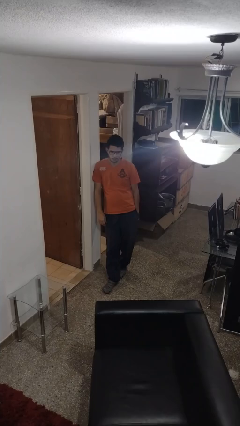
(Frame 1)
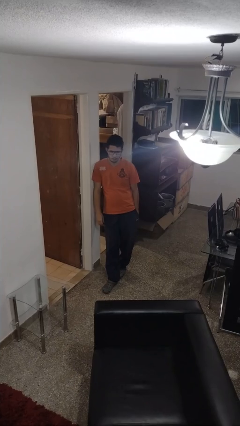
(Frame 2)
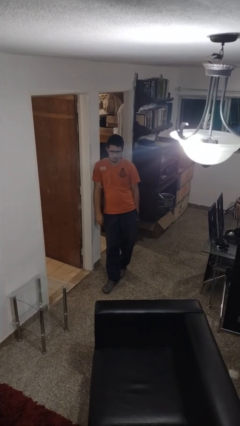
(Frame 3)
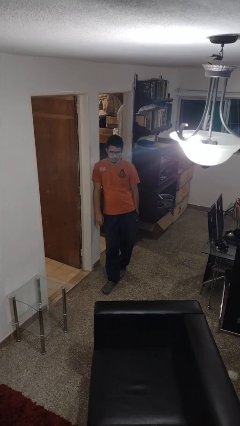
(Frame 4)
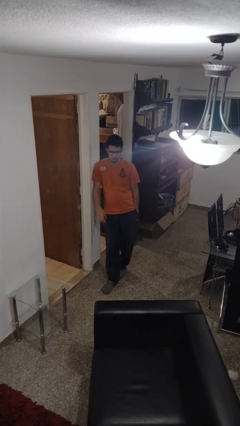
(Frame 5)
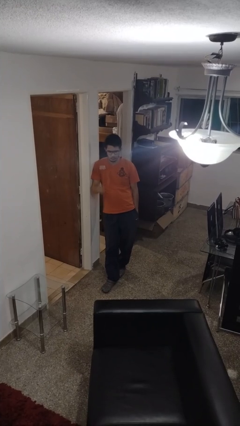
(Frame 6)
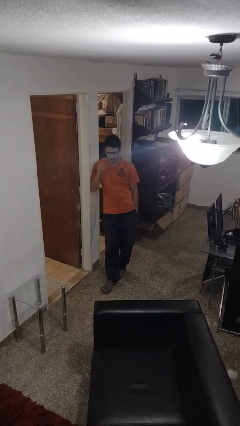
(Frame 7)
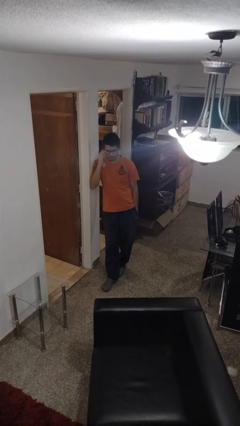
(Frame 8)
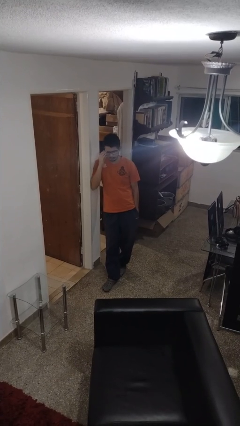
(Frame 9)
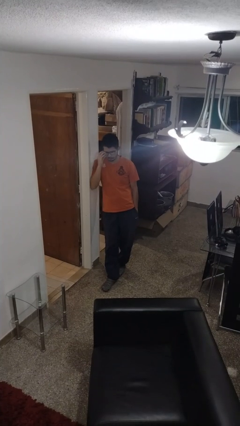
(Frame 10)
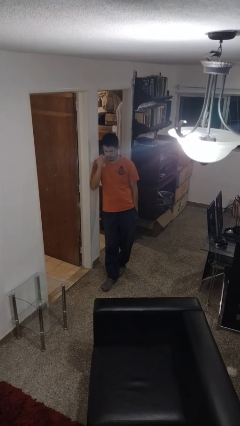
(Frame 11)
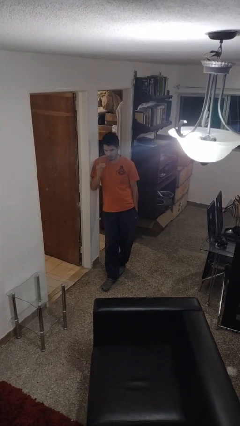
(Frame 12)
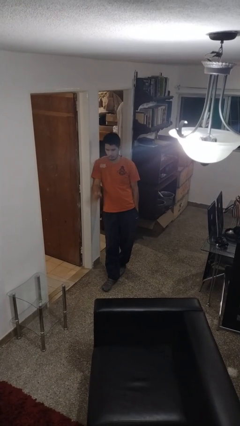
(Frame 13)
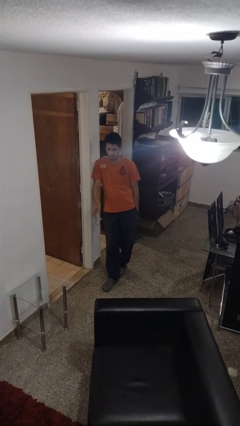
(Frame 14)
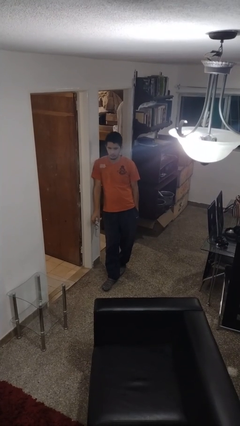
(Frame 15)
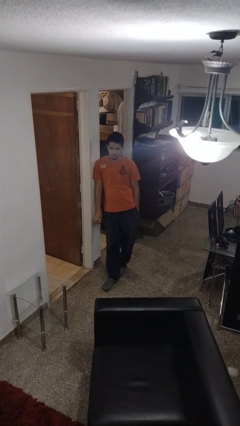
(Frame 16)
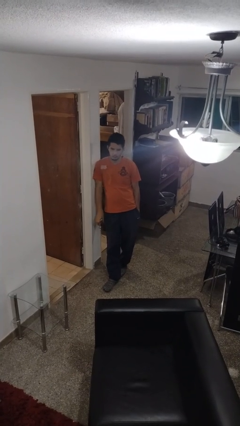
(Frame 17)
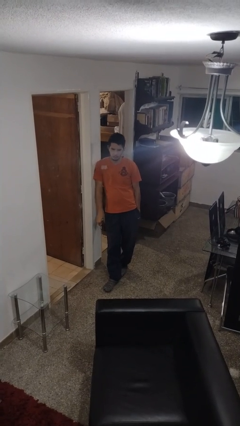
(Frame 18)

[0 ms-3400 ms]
person takes off glasses

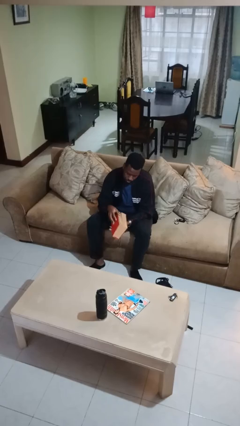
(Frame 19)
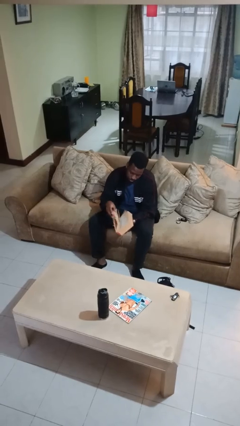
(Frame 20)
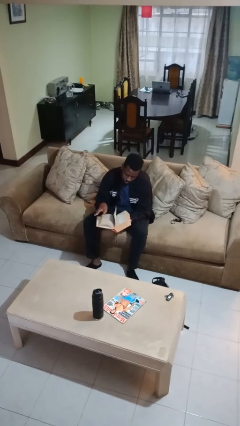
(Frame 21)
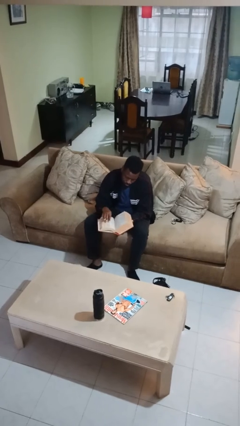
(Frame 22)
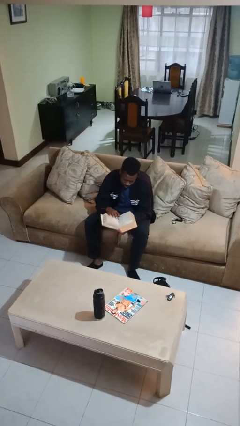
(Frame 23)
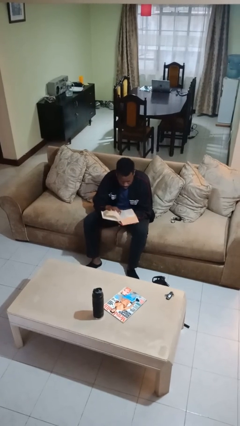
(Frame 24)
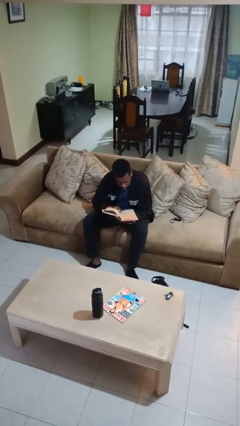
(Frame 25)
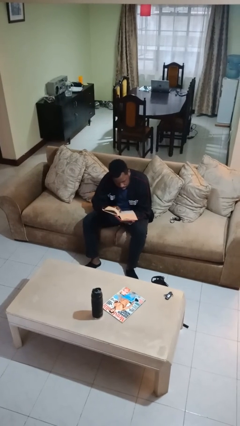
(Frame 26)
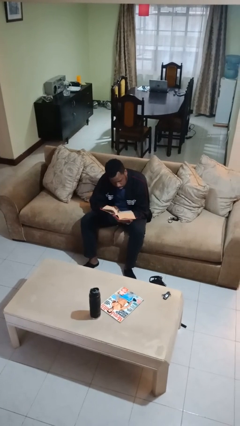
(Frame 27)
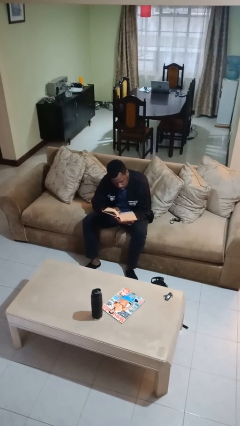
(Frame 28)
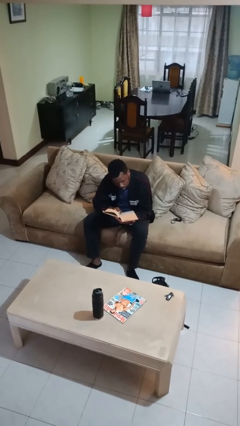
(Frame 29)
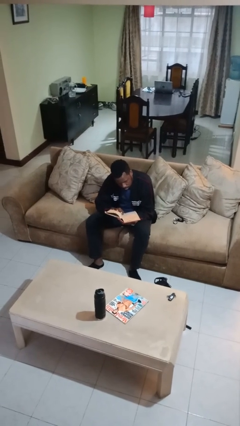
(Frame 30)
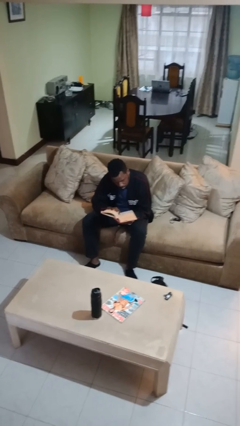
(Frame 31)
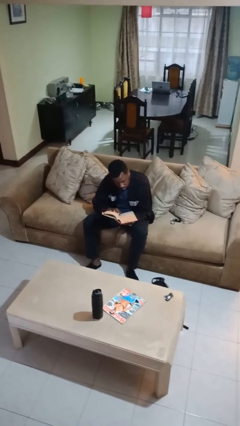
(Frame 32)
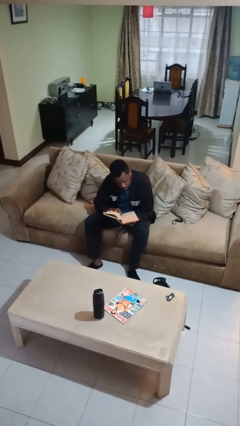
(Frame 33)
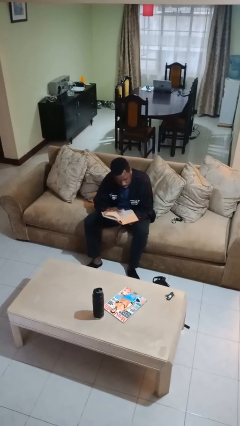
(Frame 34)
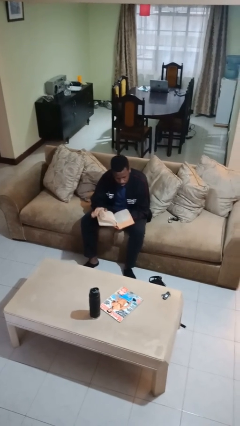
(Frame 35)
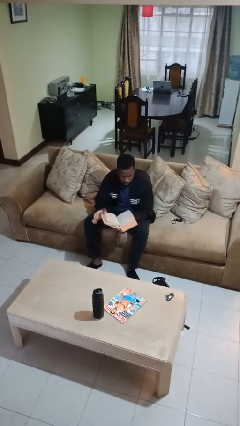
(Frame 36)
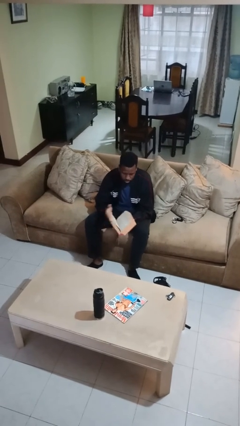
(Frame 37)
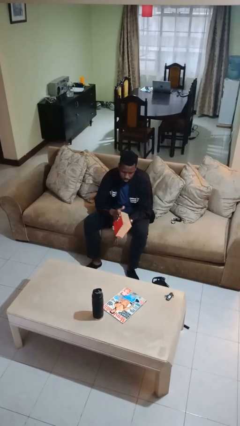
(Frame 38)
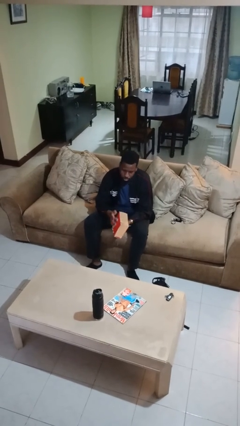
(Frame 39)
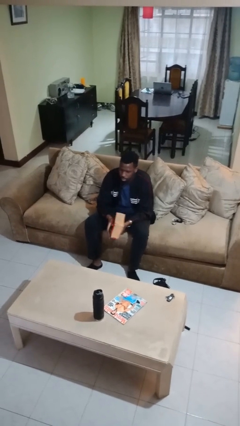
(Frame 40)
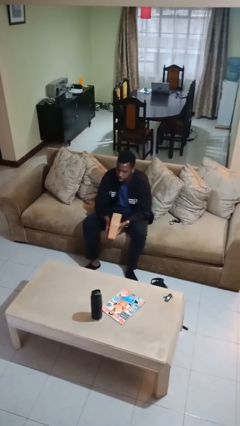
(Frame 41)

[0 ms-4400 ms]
person reads book

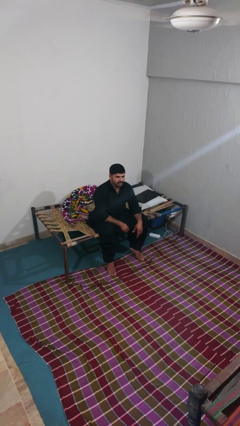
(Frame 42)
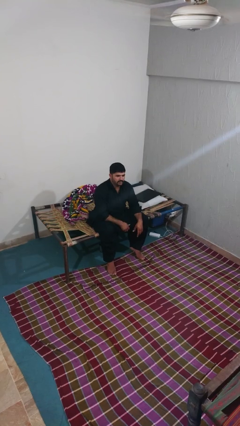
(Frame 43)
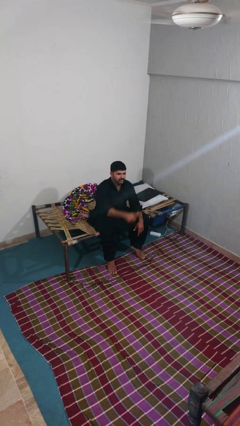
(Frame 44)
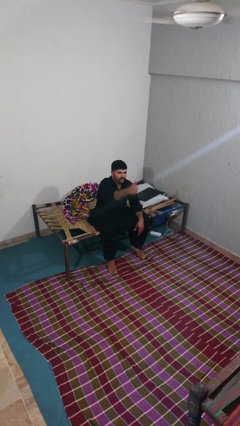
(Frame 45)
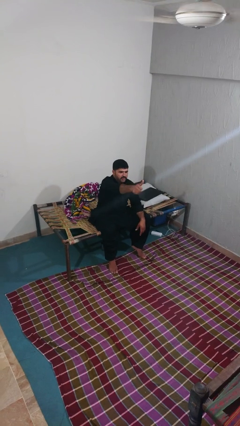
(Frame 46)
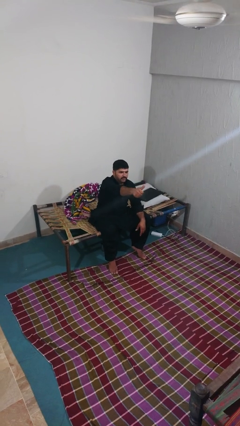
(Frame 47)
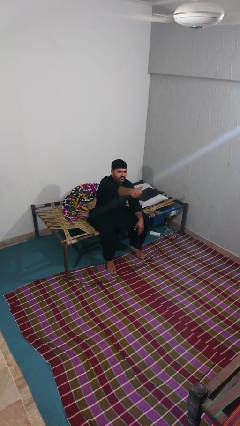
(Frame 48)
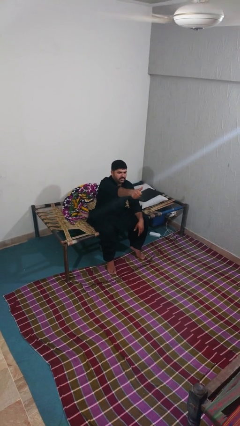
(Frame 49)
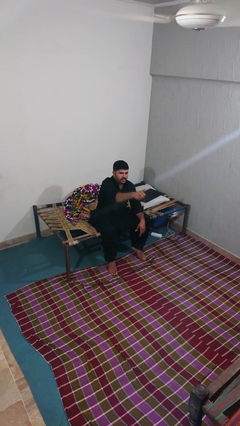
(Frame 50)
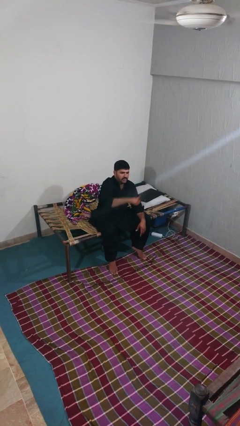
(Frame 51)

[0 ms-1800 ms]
person gestures thumbs up

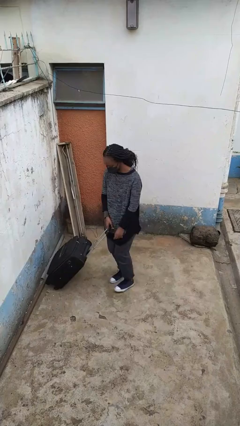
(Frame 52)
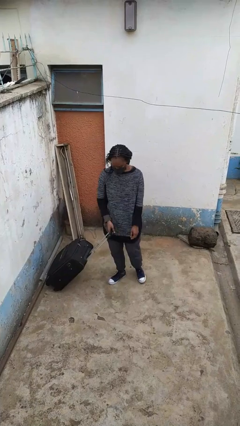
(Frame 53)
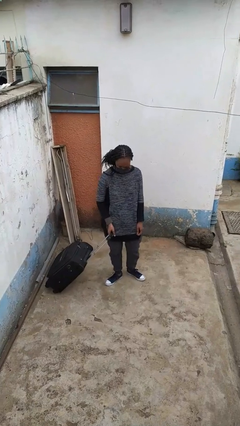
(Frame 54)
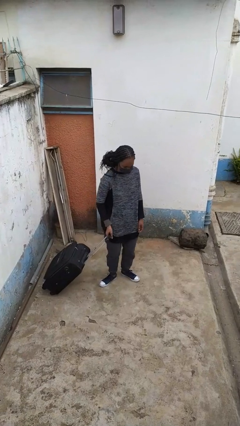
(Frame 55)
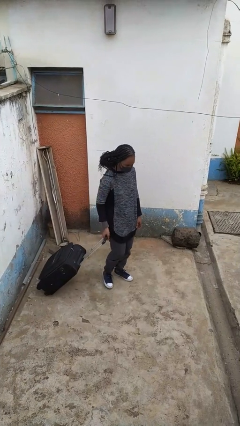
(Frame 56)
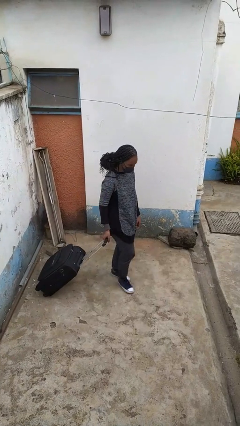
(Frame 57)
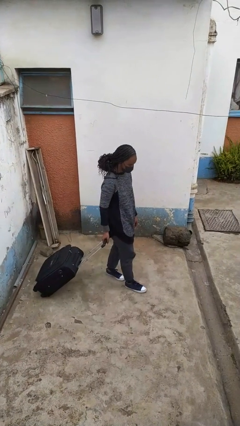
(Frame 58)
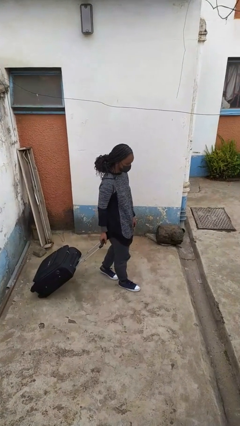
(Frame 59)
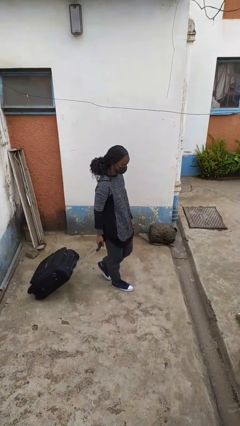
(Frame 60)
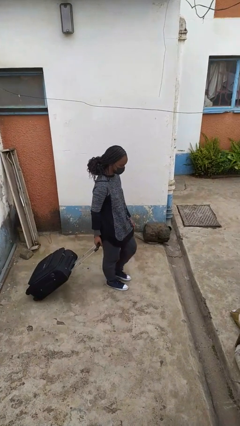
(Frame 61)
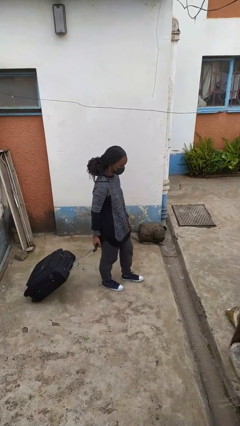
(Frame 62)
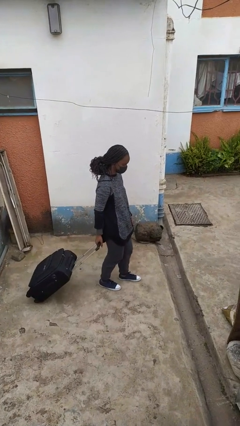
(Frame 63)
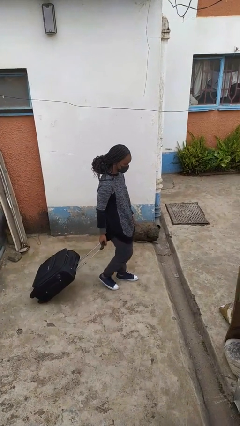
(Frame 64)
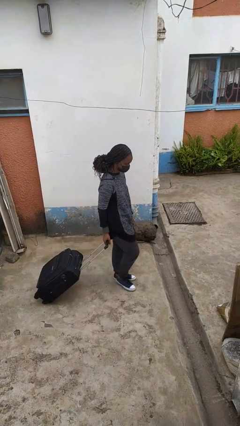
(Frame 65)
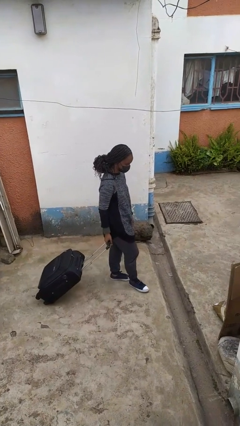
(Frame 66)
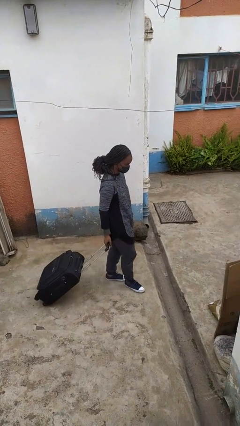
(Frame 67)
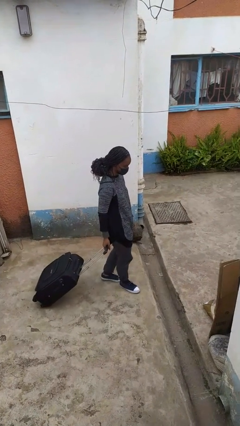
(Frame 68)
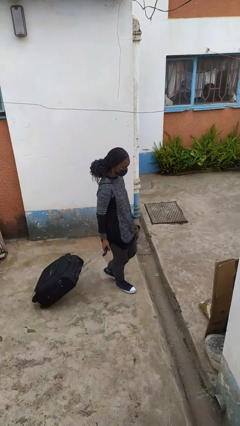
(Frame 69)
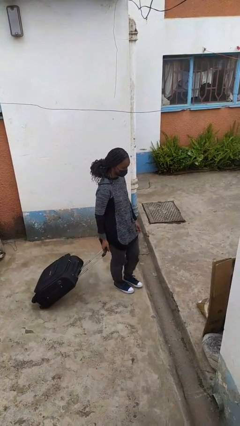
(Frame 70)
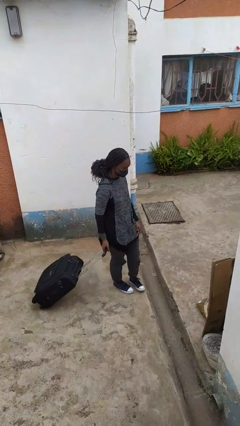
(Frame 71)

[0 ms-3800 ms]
person pulls wheeled cart

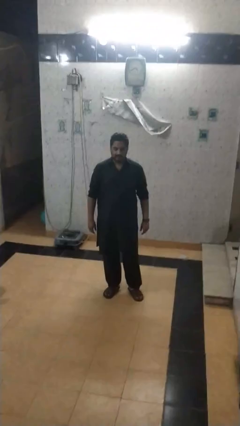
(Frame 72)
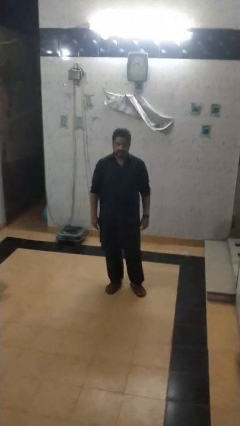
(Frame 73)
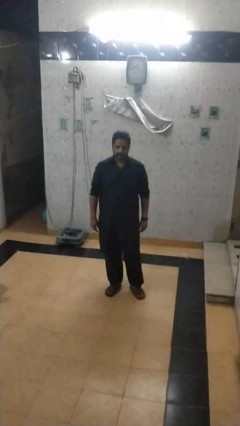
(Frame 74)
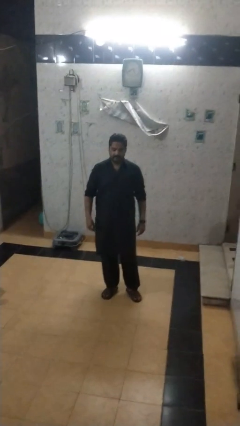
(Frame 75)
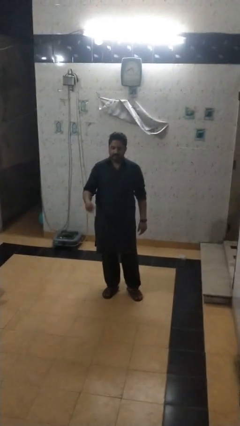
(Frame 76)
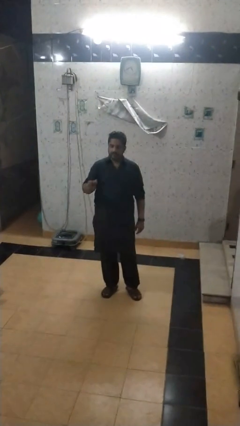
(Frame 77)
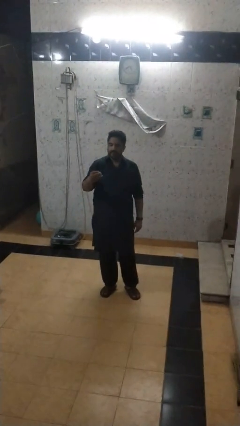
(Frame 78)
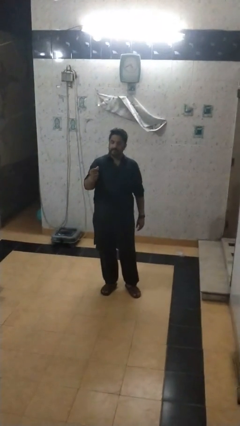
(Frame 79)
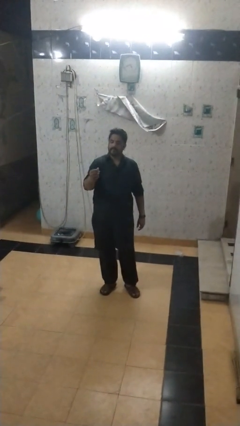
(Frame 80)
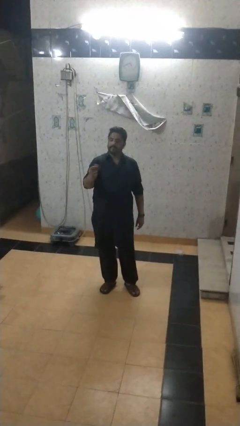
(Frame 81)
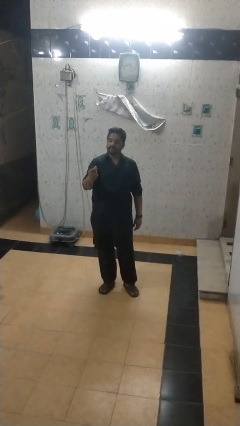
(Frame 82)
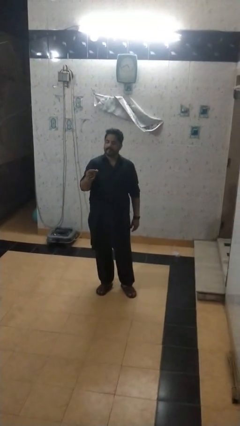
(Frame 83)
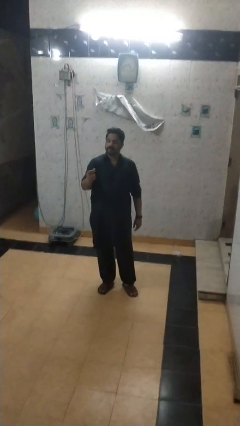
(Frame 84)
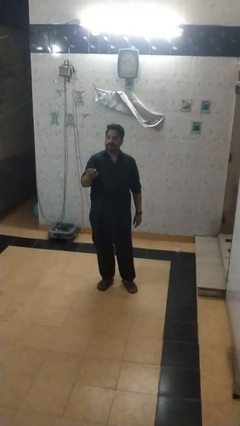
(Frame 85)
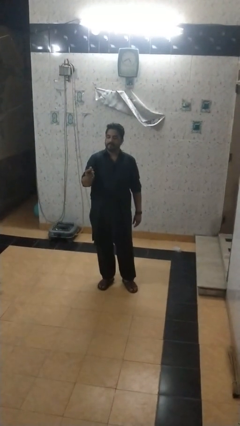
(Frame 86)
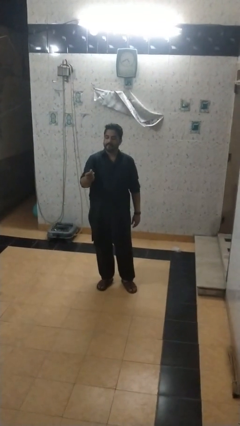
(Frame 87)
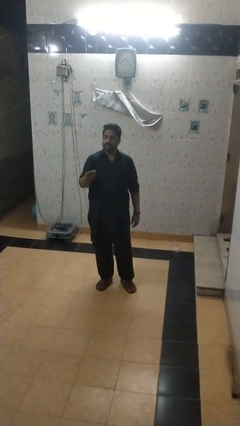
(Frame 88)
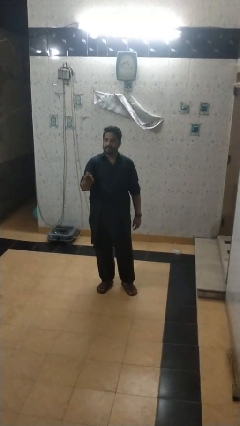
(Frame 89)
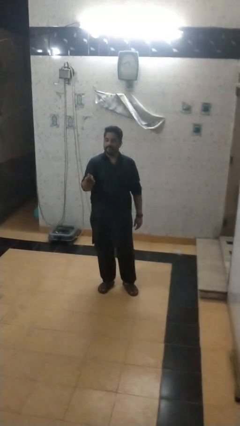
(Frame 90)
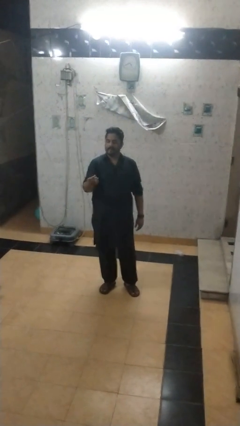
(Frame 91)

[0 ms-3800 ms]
person snaps fingers

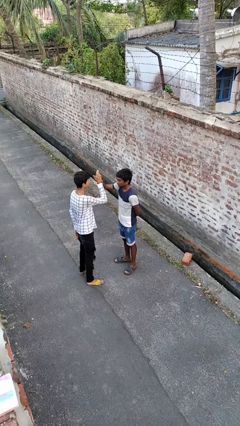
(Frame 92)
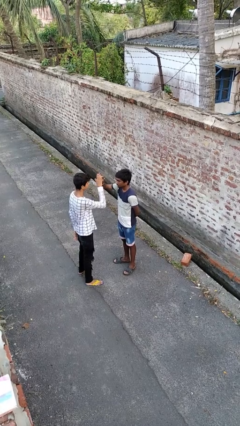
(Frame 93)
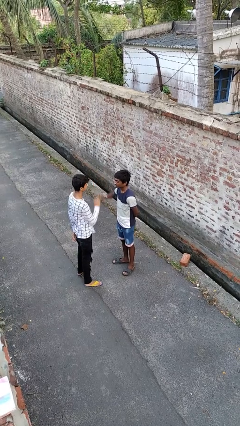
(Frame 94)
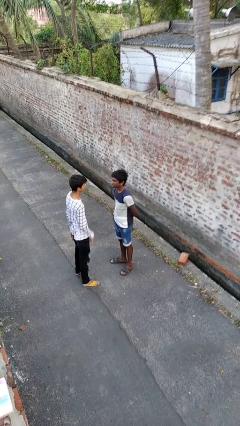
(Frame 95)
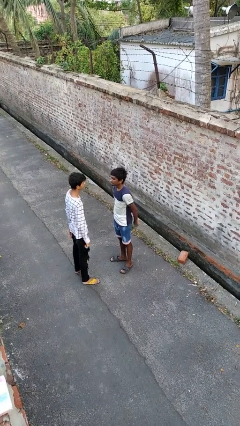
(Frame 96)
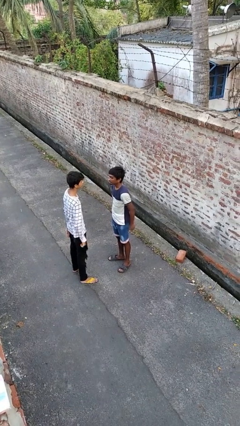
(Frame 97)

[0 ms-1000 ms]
person highfives hand
